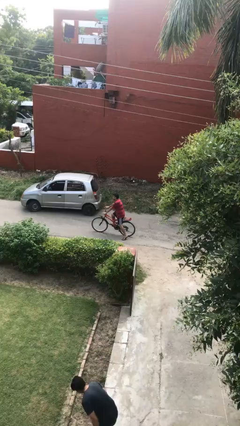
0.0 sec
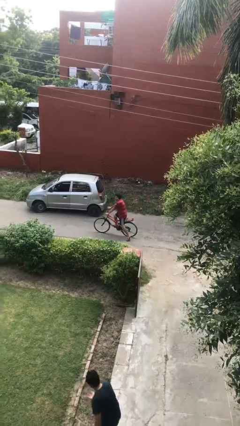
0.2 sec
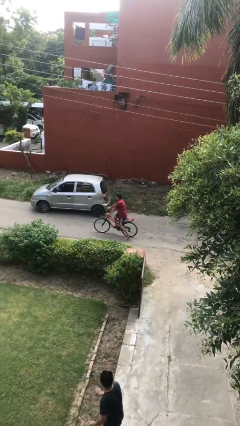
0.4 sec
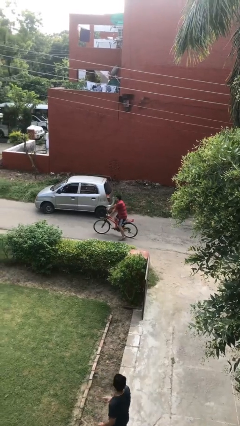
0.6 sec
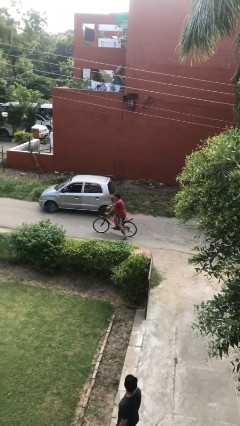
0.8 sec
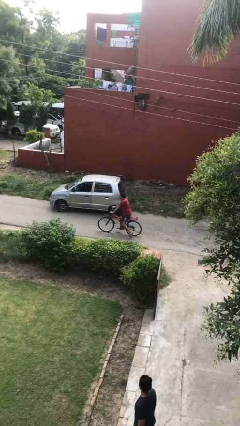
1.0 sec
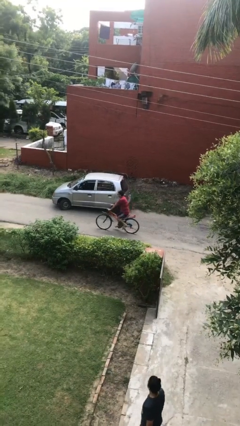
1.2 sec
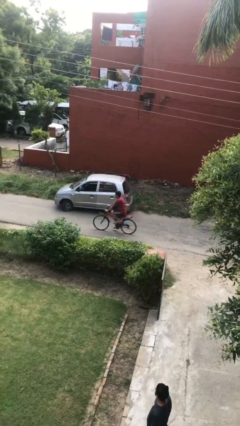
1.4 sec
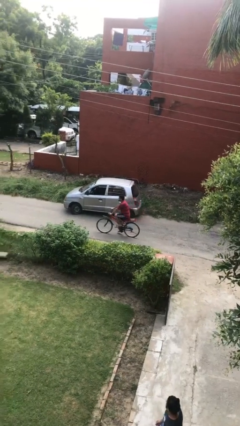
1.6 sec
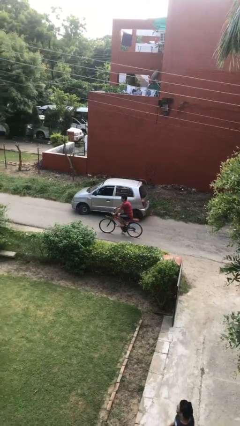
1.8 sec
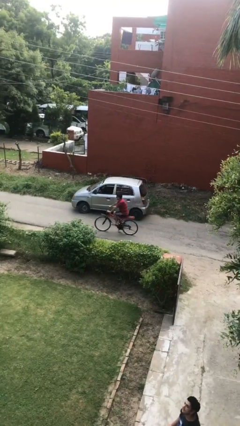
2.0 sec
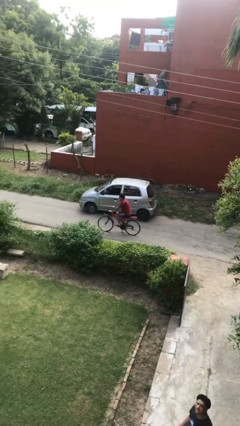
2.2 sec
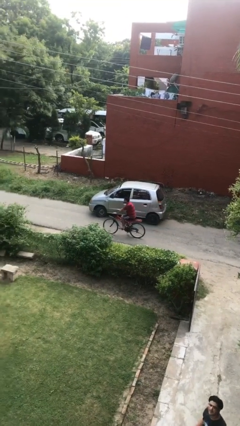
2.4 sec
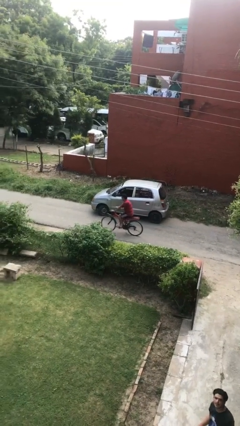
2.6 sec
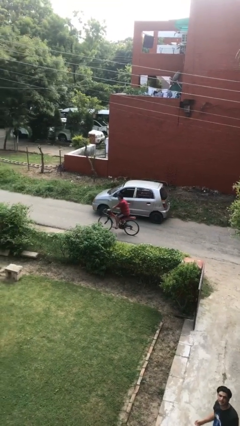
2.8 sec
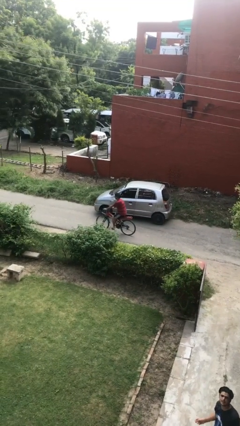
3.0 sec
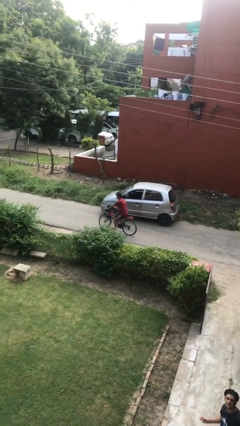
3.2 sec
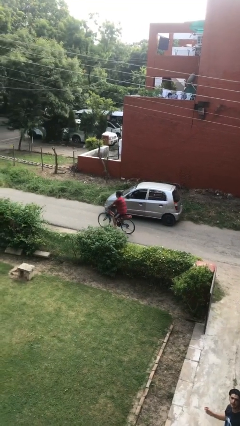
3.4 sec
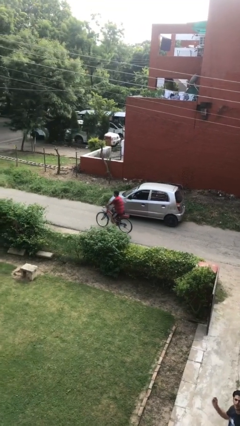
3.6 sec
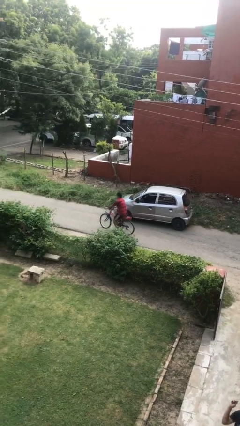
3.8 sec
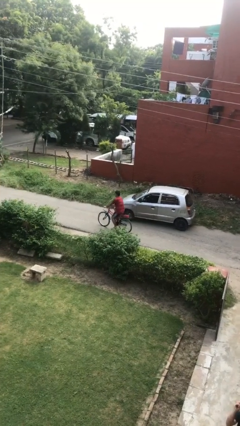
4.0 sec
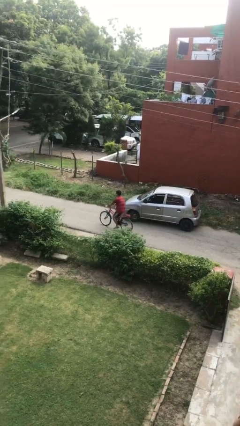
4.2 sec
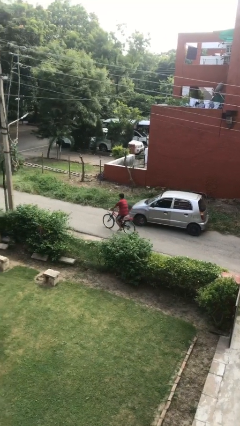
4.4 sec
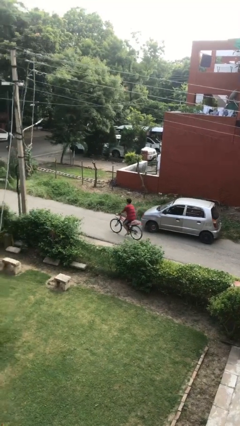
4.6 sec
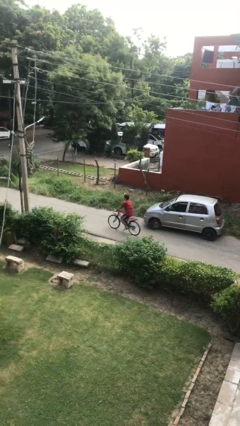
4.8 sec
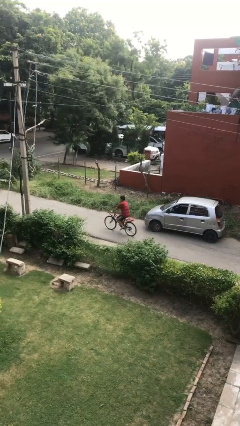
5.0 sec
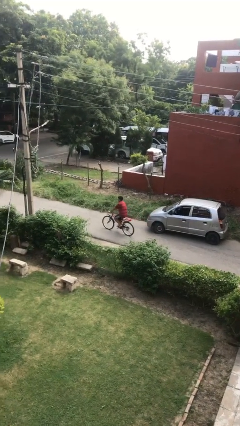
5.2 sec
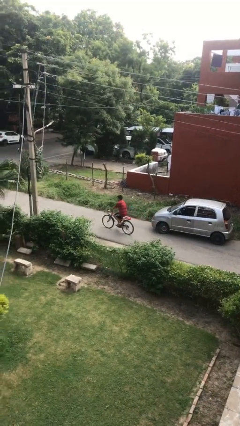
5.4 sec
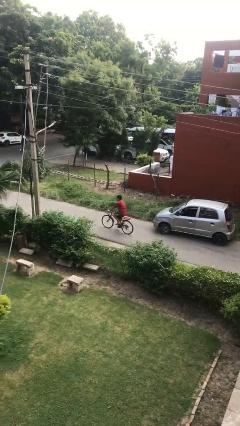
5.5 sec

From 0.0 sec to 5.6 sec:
person rides bicycle

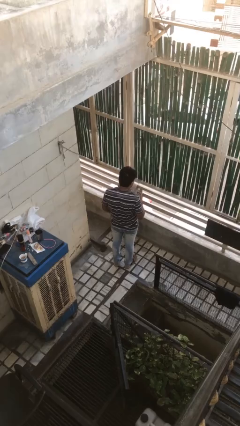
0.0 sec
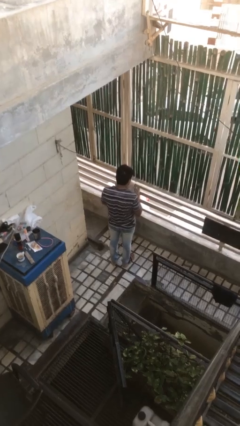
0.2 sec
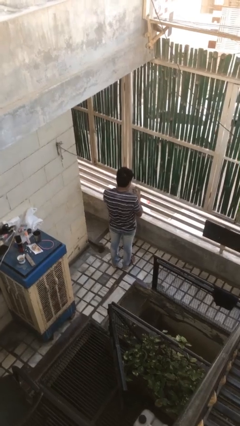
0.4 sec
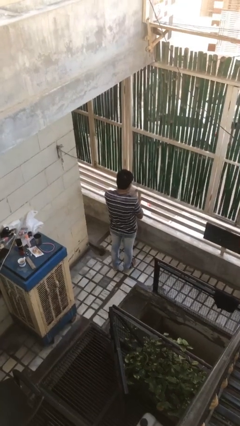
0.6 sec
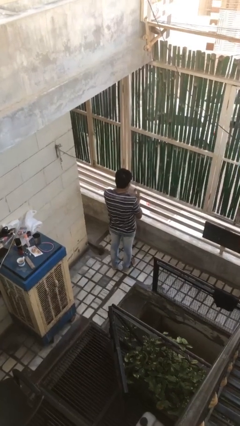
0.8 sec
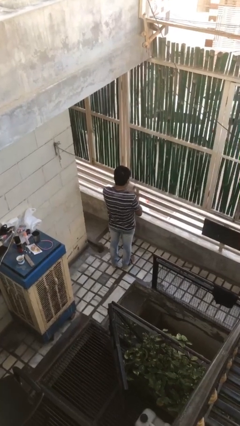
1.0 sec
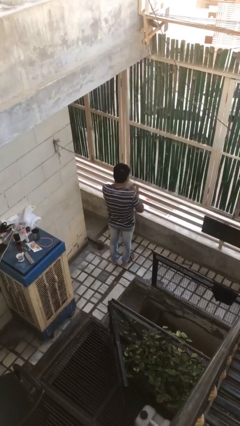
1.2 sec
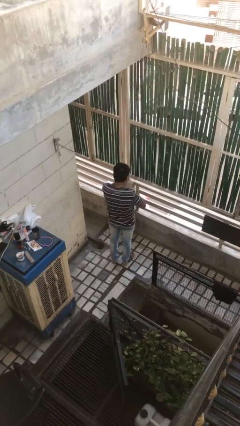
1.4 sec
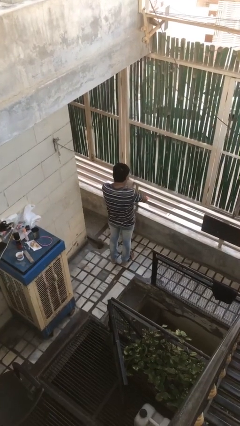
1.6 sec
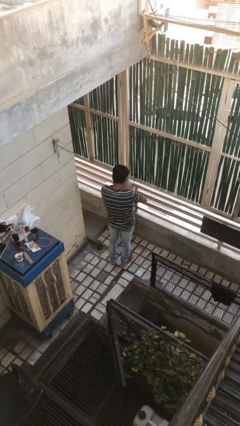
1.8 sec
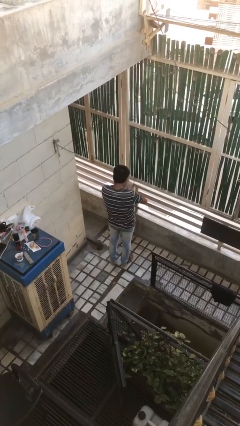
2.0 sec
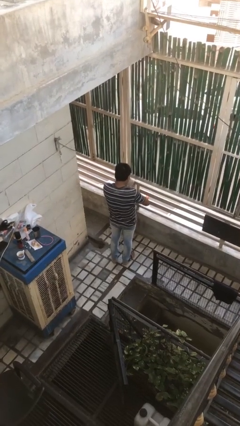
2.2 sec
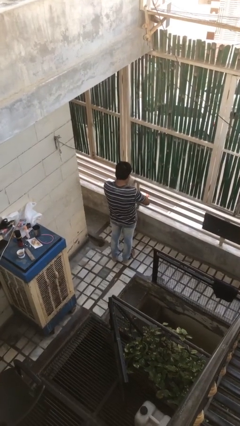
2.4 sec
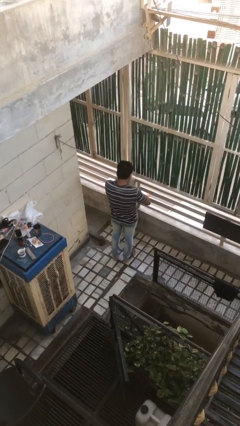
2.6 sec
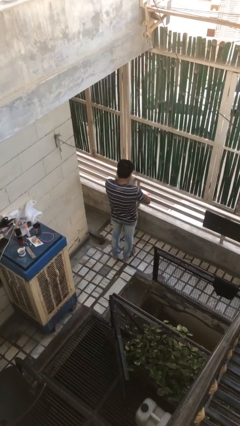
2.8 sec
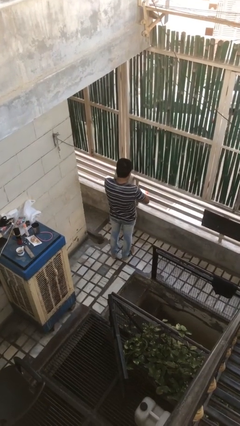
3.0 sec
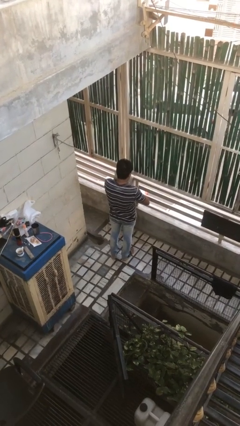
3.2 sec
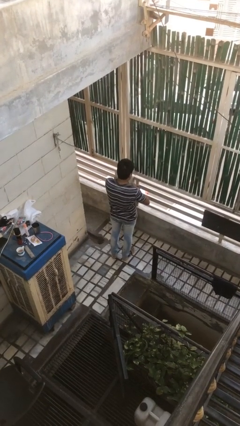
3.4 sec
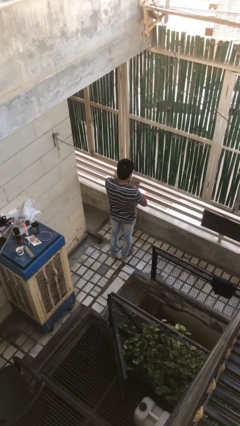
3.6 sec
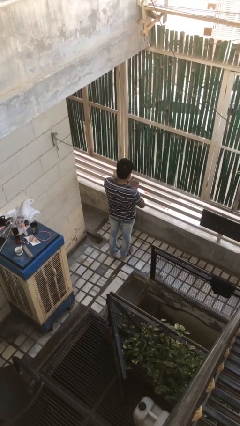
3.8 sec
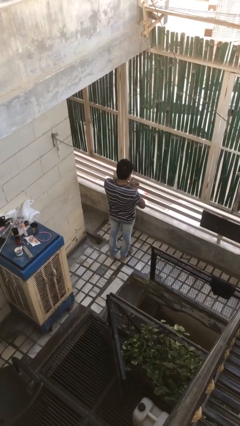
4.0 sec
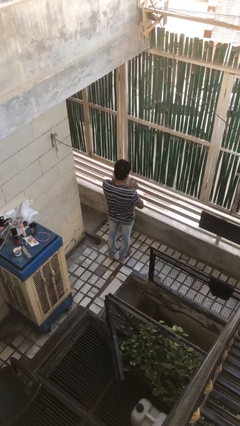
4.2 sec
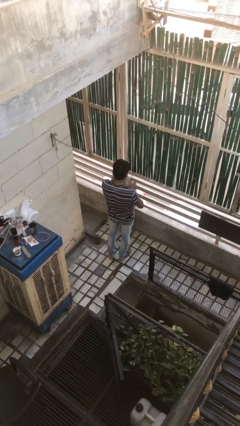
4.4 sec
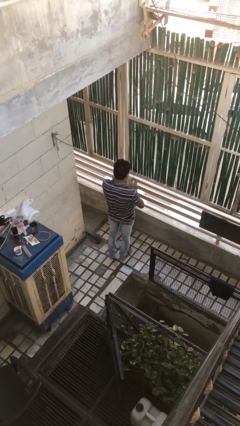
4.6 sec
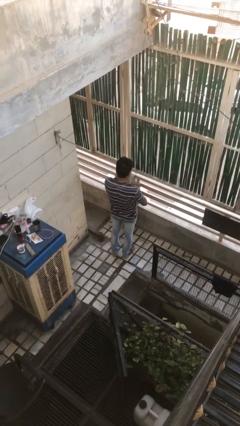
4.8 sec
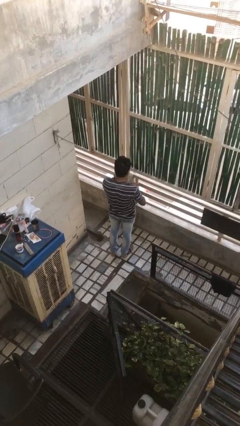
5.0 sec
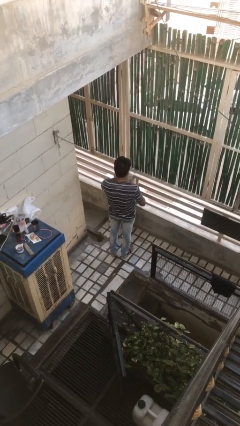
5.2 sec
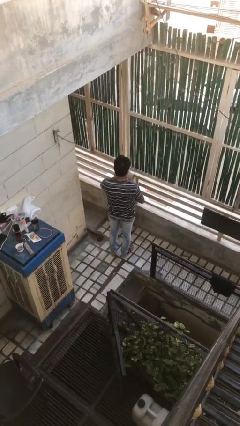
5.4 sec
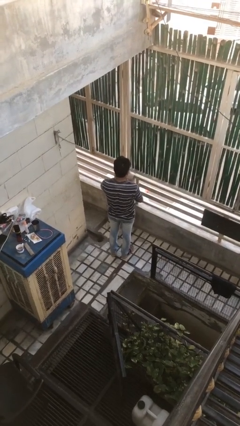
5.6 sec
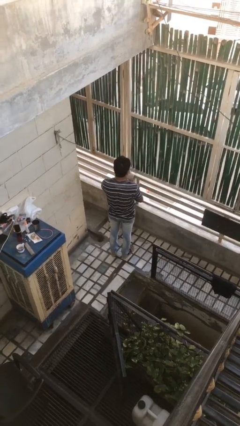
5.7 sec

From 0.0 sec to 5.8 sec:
person puts on wristwatch

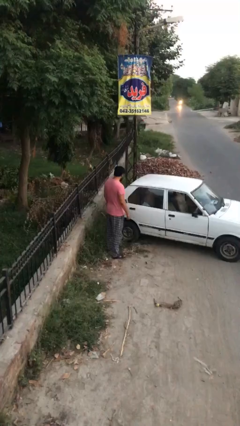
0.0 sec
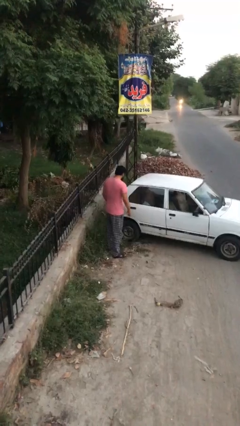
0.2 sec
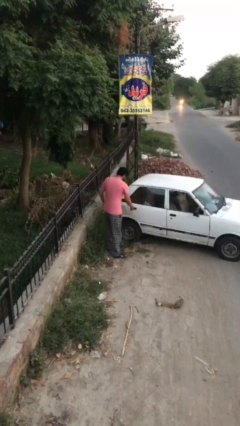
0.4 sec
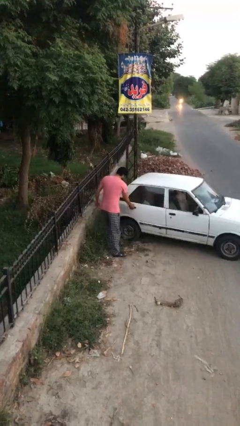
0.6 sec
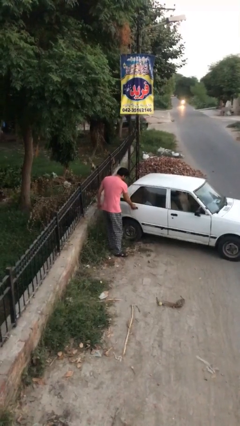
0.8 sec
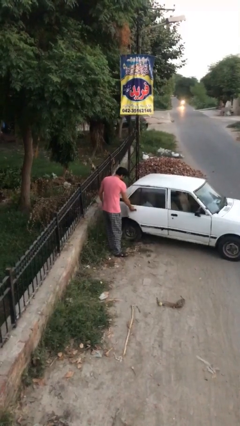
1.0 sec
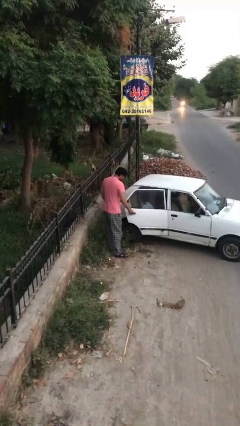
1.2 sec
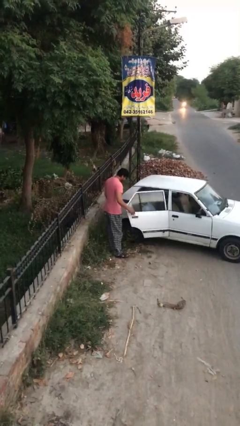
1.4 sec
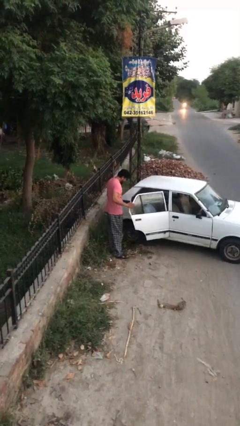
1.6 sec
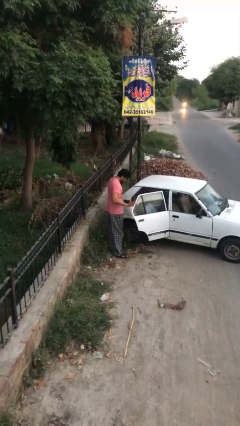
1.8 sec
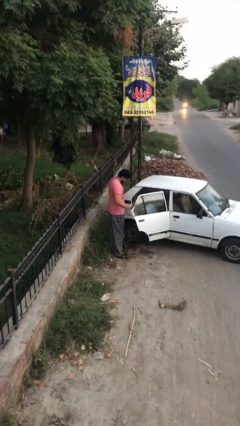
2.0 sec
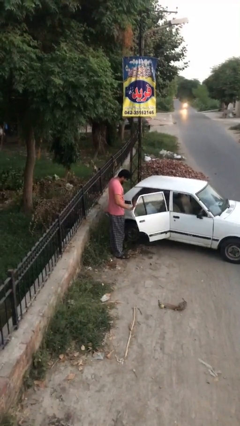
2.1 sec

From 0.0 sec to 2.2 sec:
person opens car door

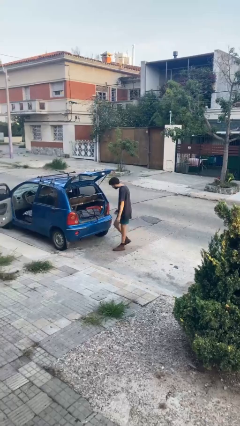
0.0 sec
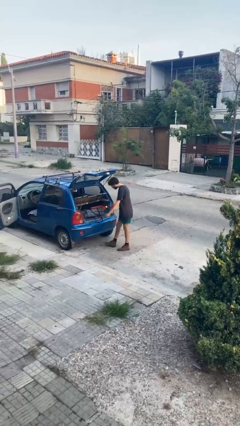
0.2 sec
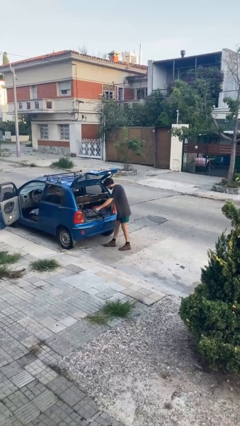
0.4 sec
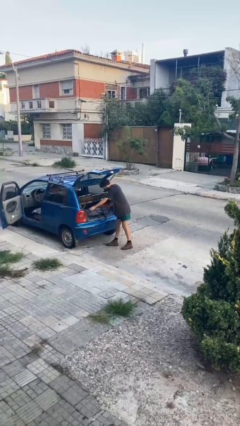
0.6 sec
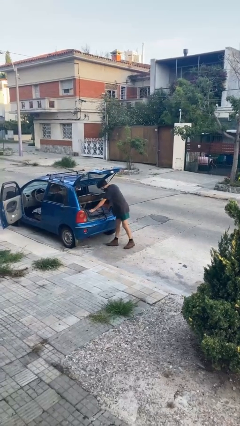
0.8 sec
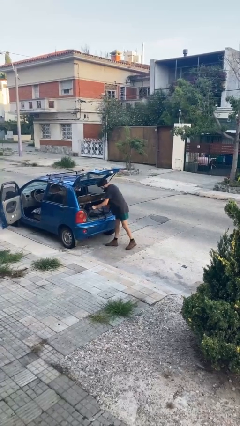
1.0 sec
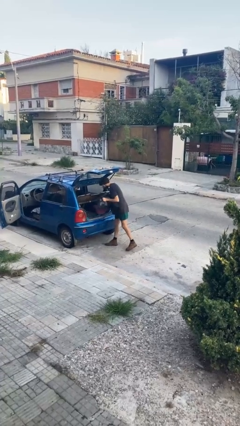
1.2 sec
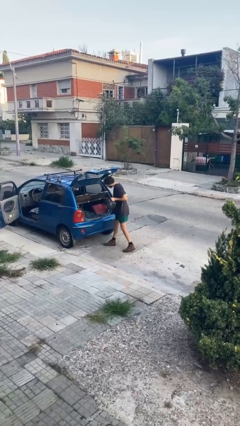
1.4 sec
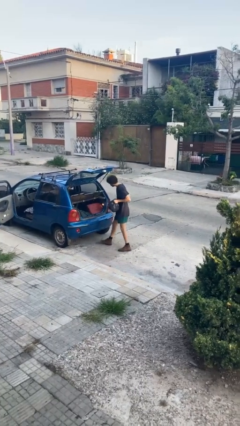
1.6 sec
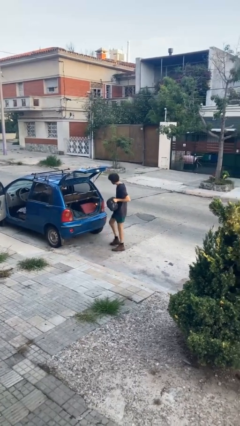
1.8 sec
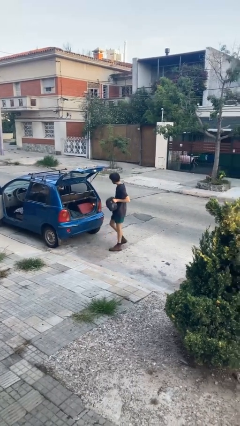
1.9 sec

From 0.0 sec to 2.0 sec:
person unloads car

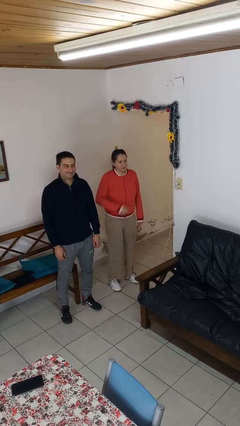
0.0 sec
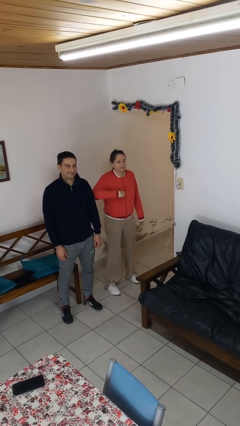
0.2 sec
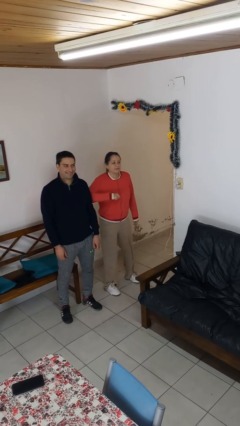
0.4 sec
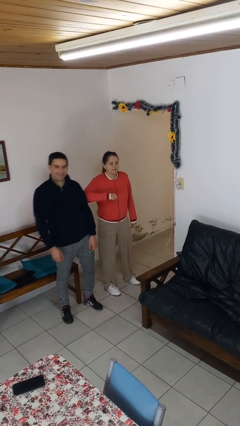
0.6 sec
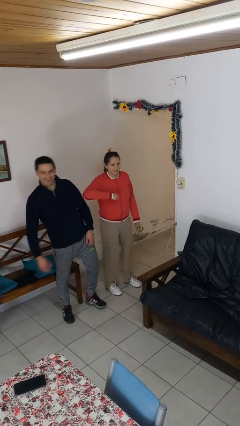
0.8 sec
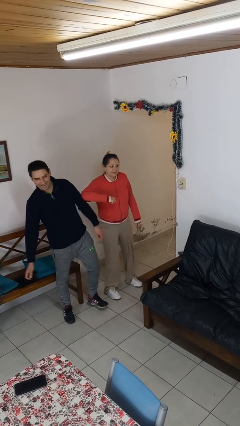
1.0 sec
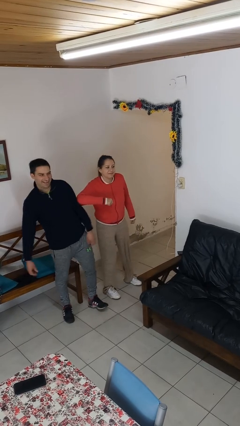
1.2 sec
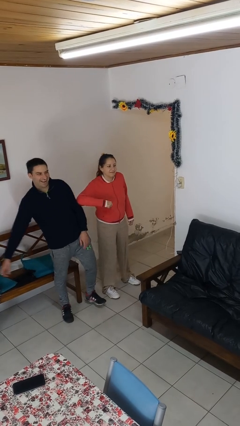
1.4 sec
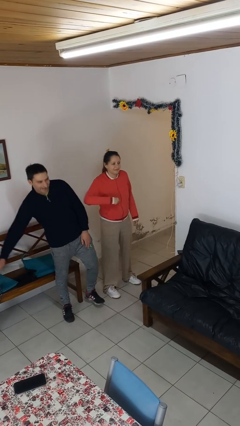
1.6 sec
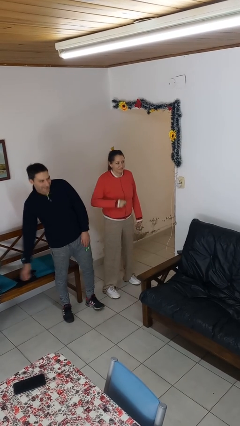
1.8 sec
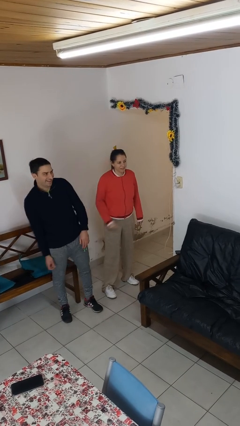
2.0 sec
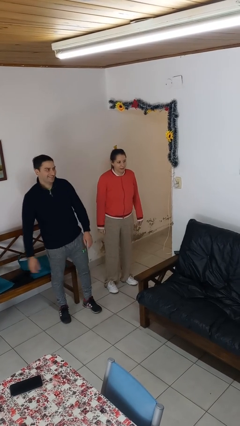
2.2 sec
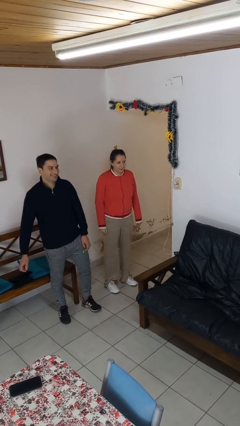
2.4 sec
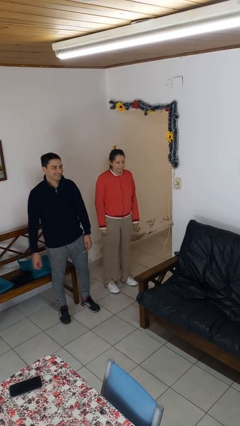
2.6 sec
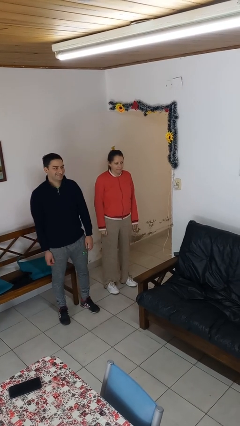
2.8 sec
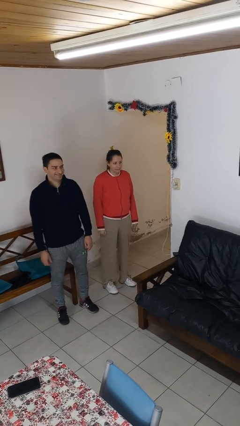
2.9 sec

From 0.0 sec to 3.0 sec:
person nudges person with elbow
